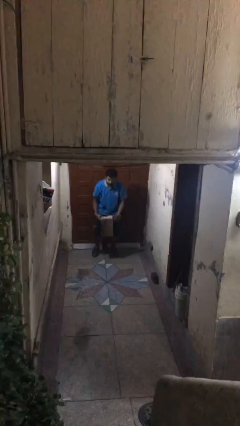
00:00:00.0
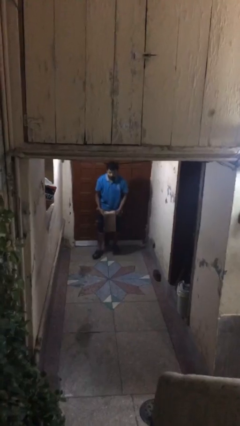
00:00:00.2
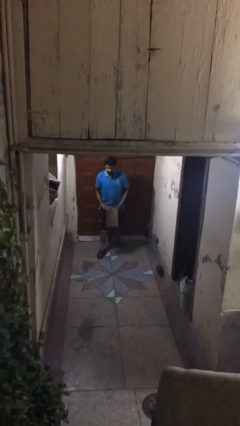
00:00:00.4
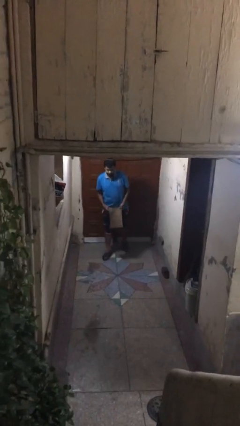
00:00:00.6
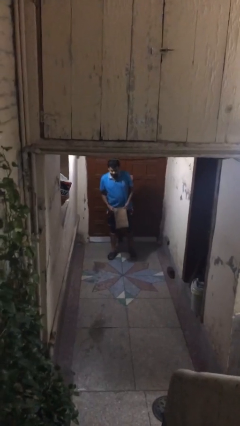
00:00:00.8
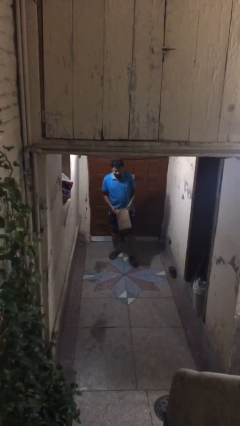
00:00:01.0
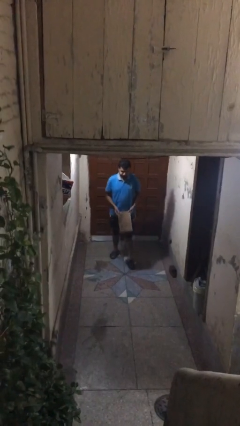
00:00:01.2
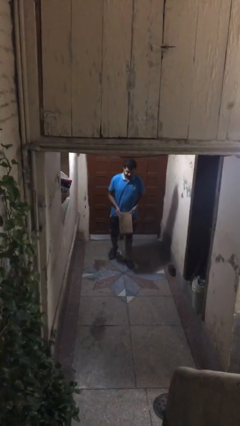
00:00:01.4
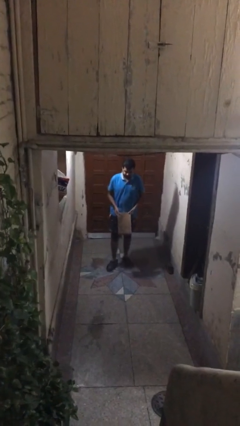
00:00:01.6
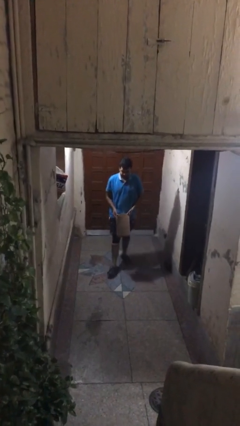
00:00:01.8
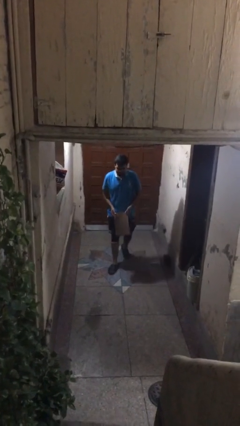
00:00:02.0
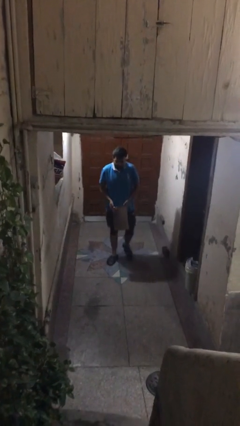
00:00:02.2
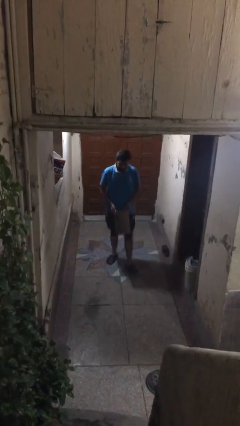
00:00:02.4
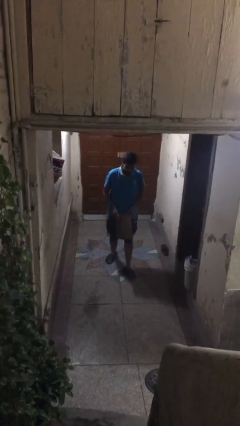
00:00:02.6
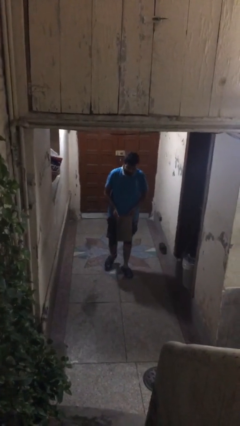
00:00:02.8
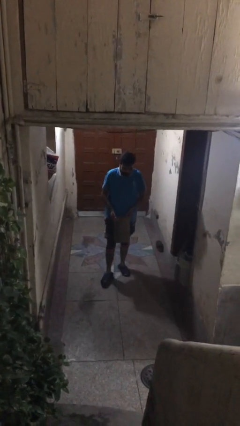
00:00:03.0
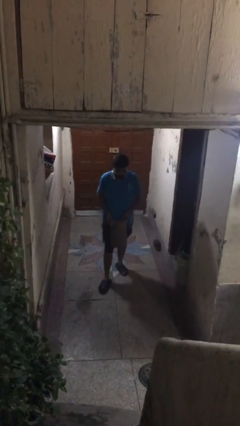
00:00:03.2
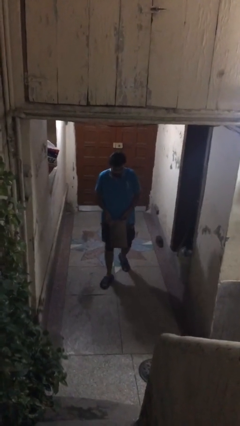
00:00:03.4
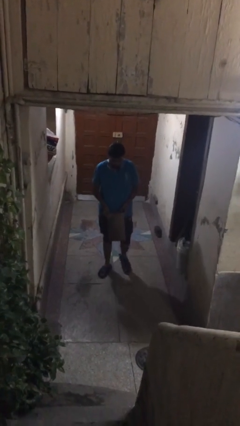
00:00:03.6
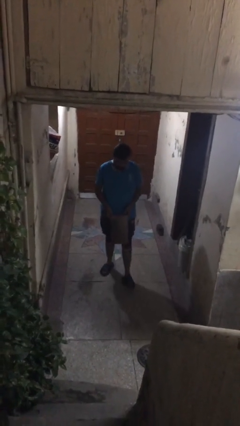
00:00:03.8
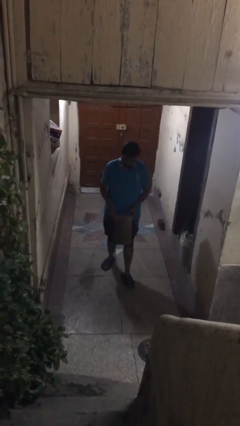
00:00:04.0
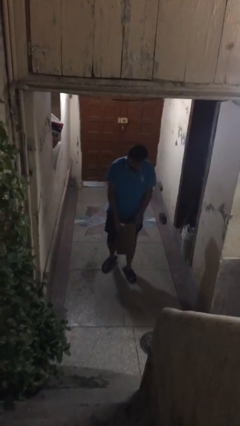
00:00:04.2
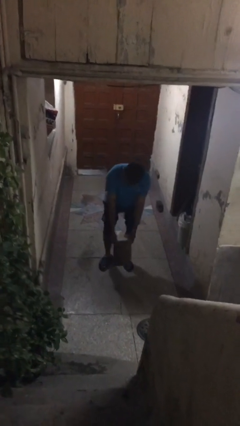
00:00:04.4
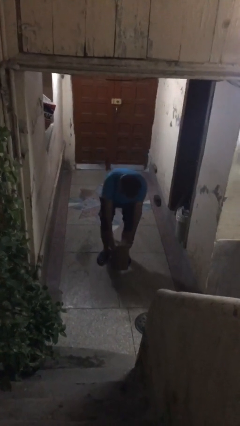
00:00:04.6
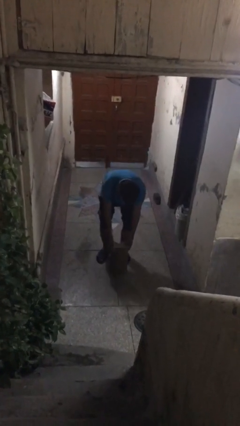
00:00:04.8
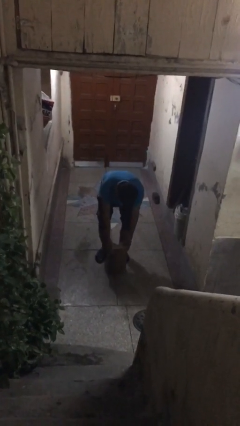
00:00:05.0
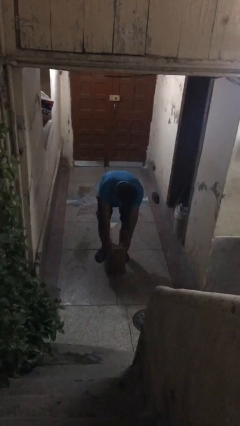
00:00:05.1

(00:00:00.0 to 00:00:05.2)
person carries heavy object

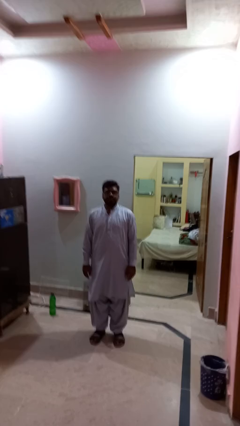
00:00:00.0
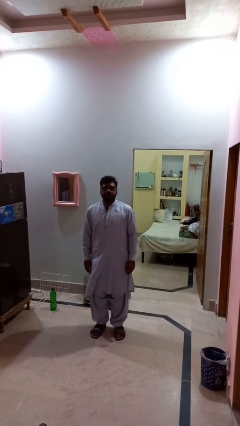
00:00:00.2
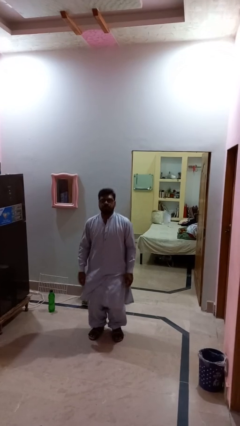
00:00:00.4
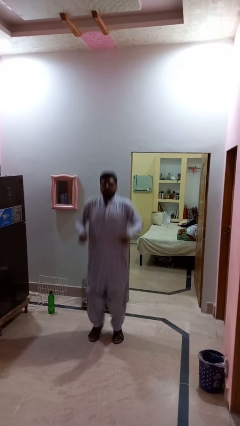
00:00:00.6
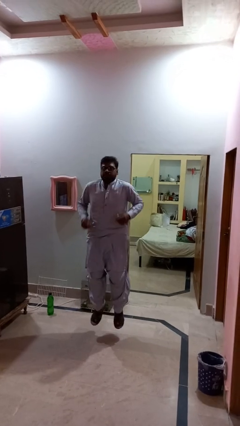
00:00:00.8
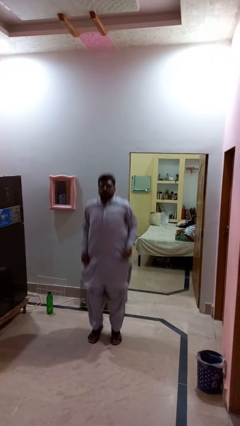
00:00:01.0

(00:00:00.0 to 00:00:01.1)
person jumps

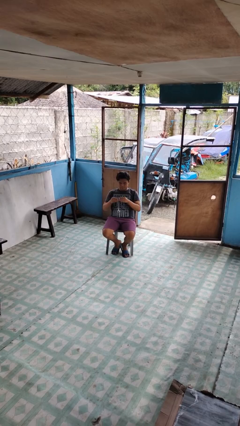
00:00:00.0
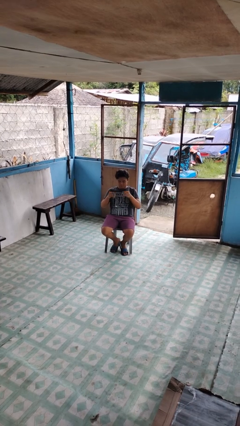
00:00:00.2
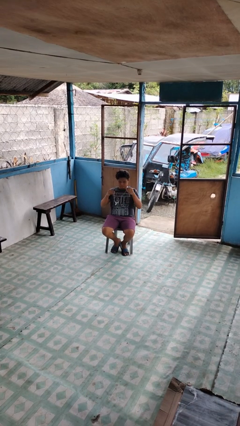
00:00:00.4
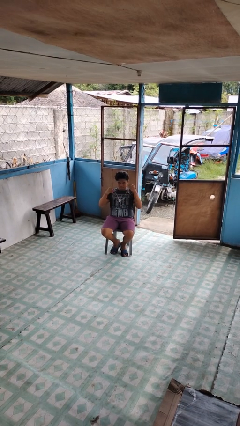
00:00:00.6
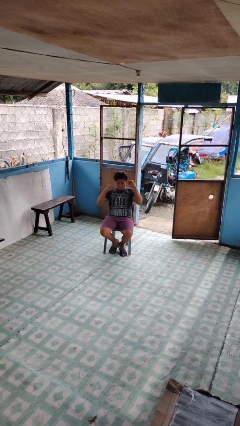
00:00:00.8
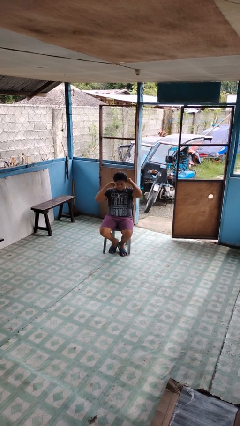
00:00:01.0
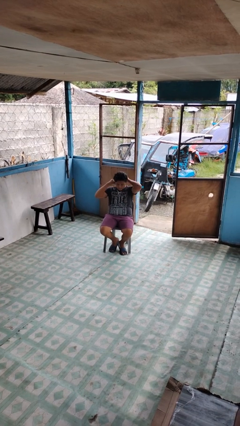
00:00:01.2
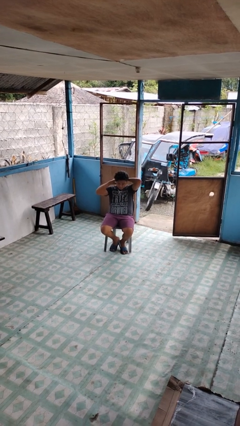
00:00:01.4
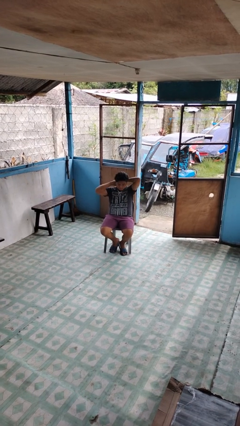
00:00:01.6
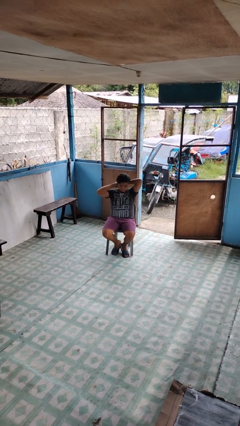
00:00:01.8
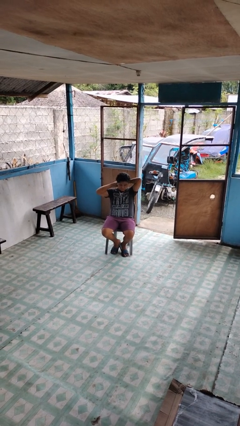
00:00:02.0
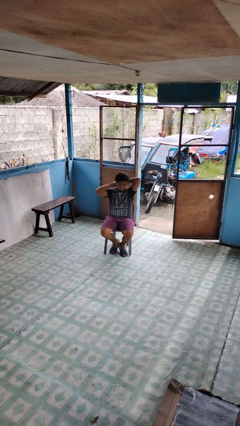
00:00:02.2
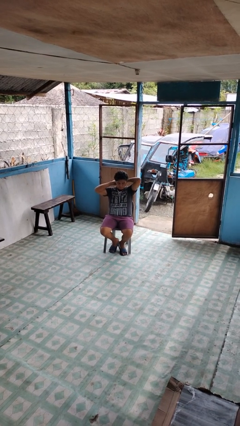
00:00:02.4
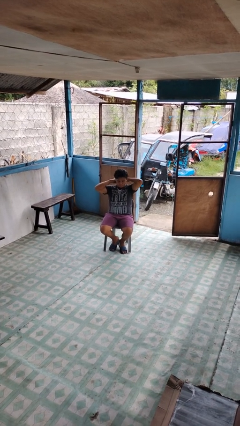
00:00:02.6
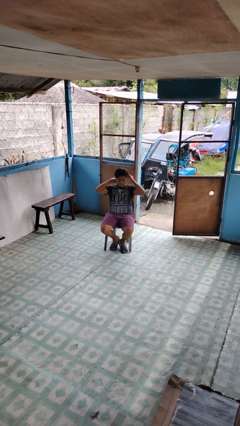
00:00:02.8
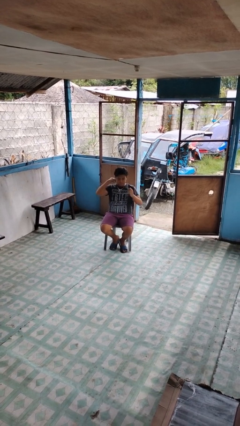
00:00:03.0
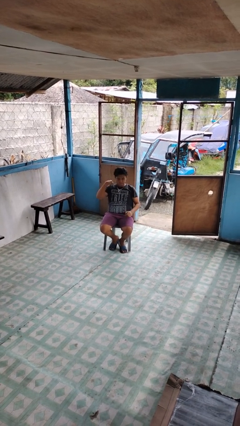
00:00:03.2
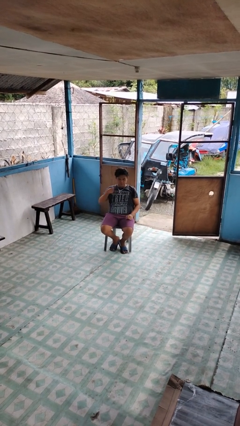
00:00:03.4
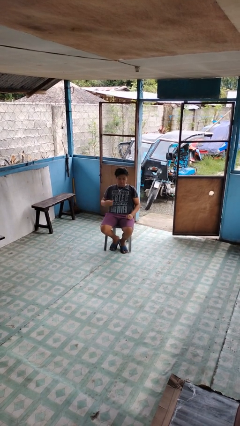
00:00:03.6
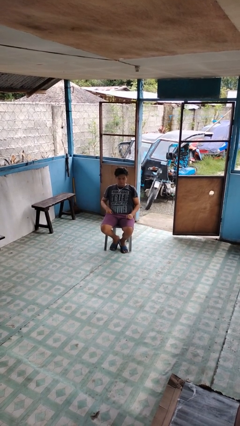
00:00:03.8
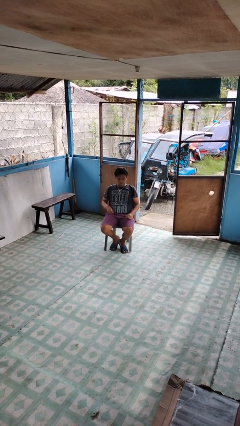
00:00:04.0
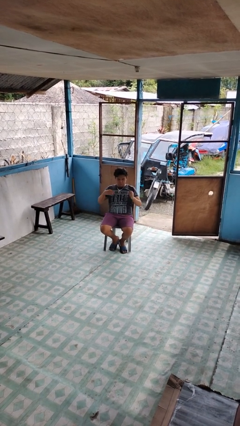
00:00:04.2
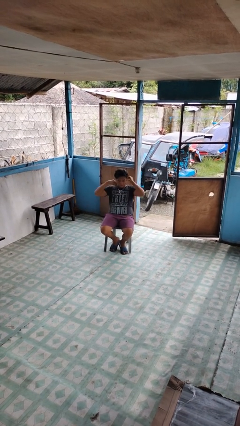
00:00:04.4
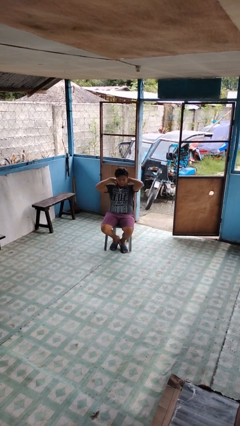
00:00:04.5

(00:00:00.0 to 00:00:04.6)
person puts on necklace

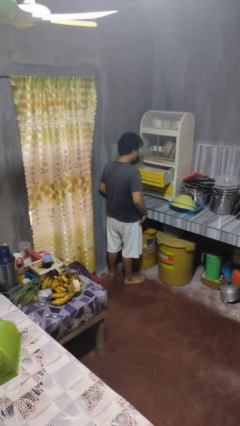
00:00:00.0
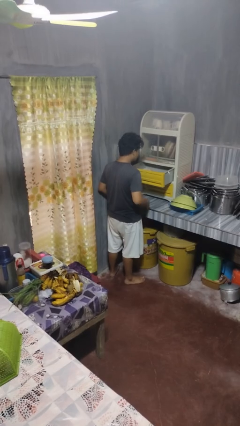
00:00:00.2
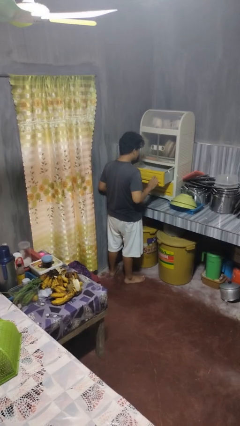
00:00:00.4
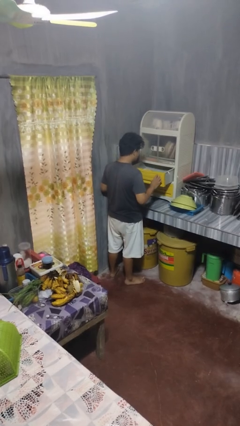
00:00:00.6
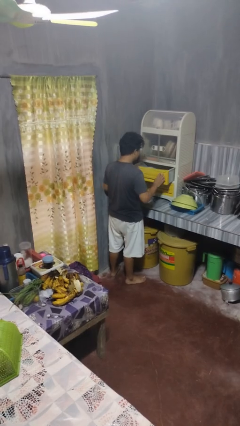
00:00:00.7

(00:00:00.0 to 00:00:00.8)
person closes kitchen drawer

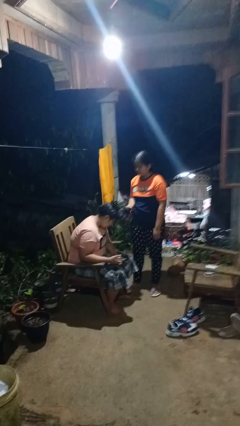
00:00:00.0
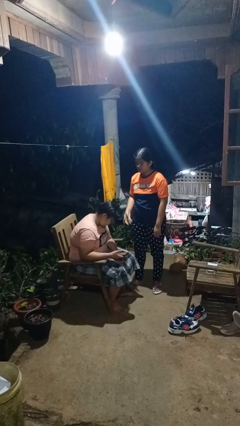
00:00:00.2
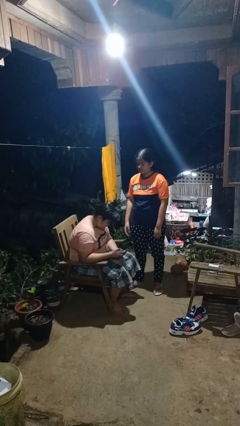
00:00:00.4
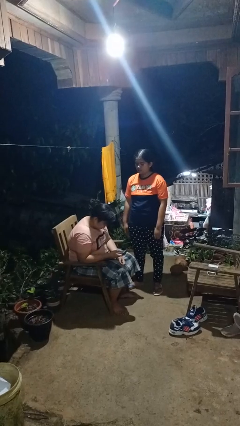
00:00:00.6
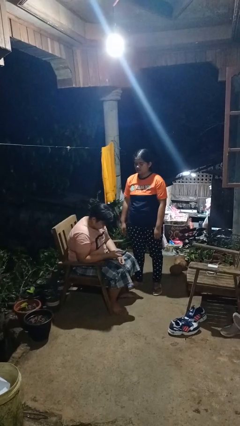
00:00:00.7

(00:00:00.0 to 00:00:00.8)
person grabs person by hair

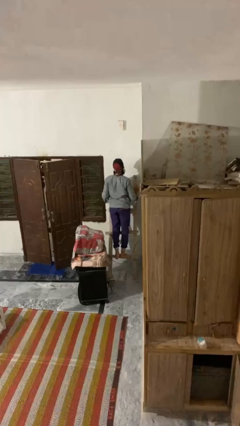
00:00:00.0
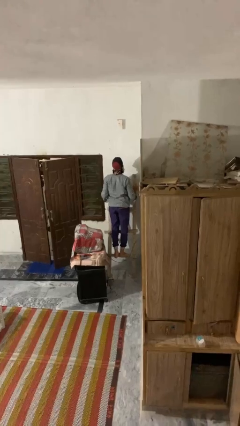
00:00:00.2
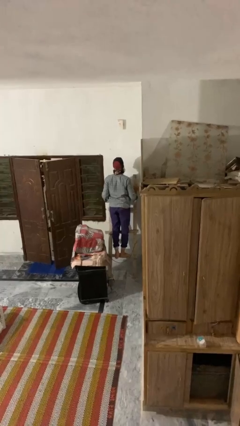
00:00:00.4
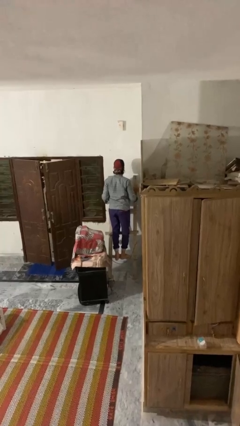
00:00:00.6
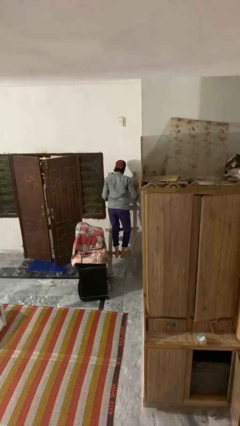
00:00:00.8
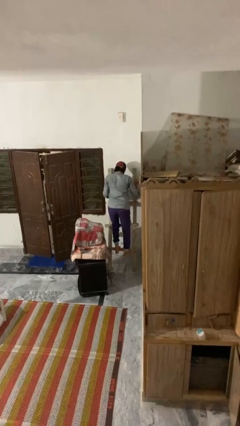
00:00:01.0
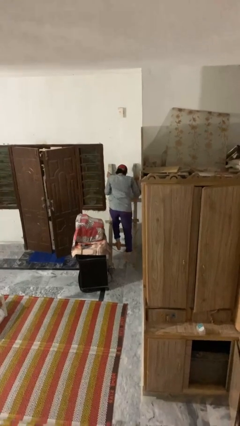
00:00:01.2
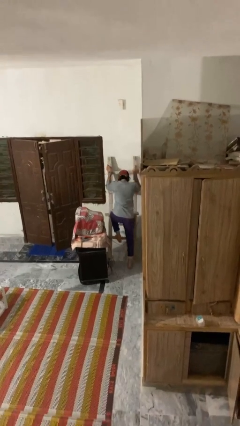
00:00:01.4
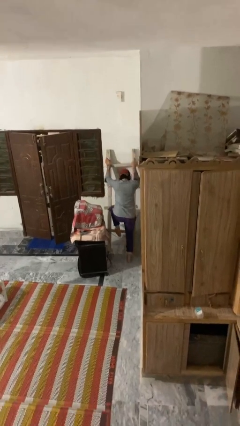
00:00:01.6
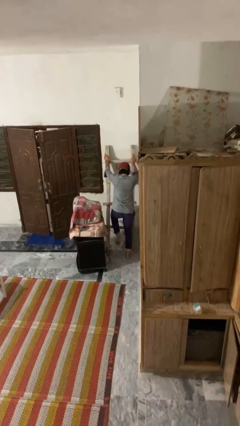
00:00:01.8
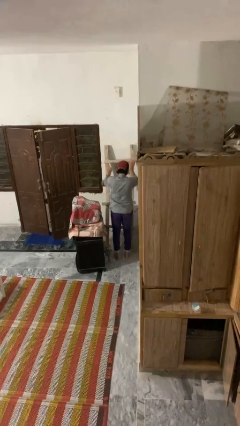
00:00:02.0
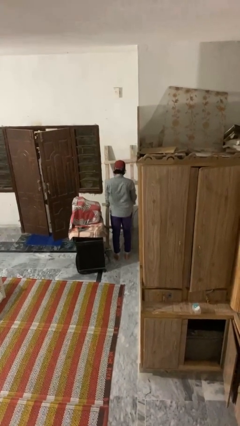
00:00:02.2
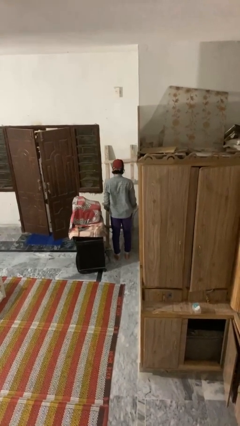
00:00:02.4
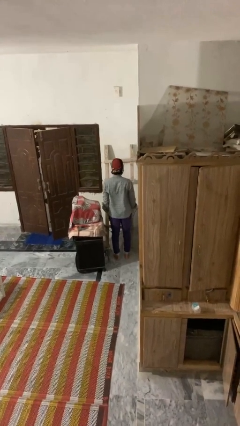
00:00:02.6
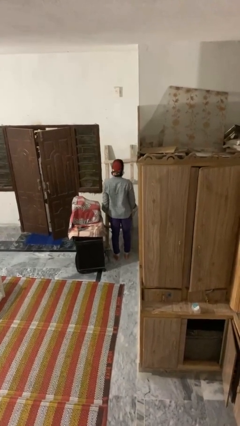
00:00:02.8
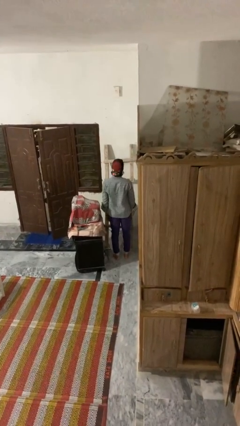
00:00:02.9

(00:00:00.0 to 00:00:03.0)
person climbs down ladder

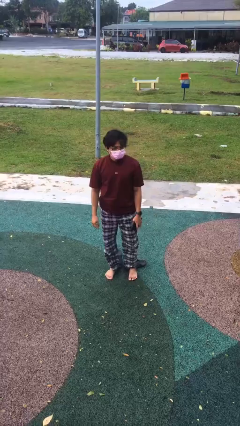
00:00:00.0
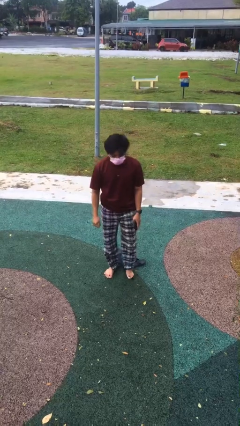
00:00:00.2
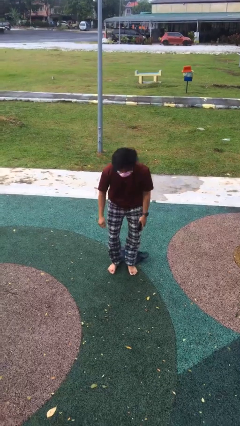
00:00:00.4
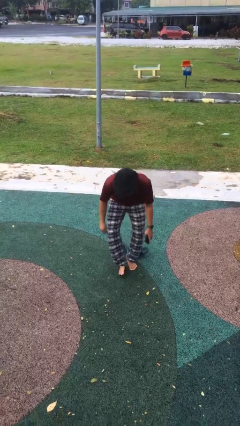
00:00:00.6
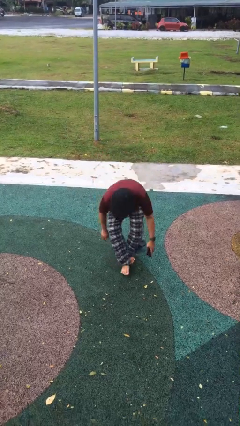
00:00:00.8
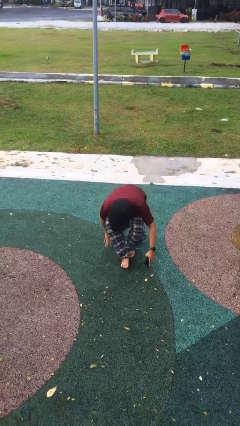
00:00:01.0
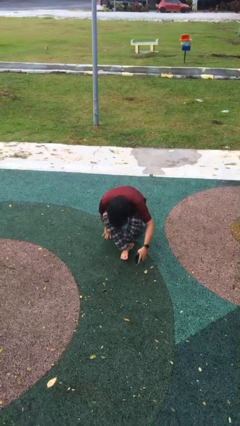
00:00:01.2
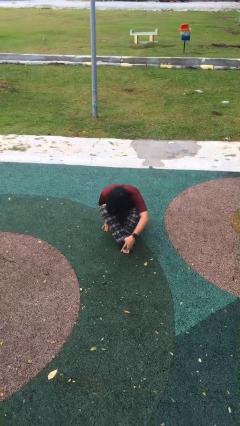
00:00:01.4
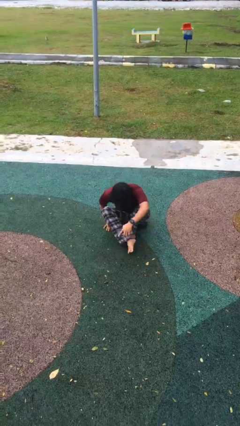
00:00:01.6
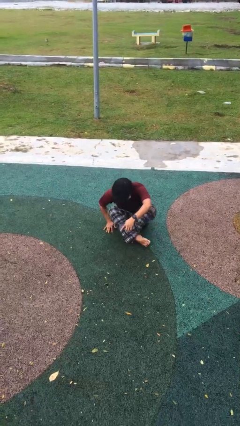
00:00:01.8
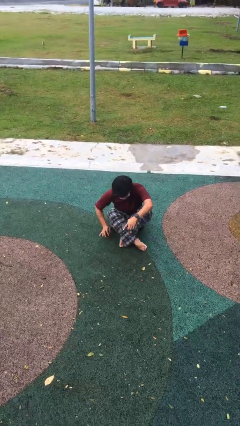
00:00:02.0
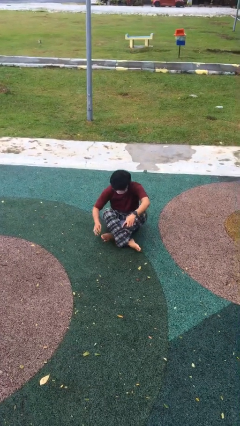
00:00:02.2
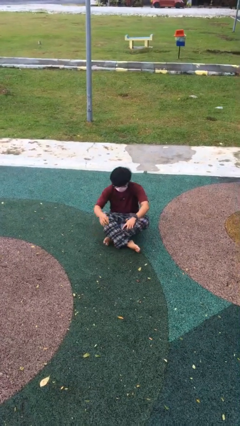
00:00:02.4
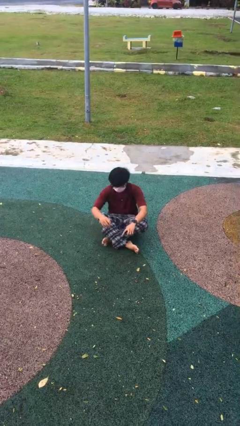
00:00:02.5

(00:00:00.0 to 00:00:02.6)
person sits crisscross
